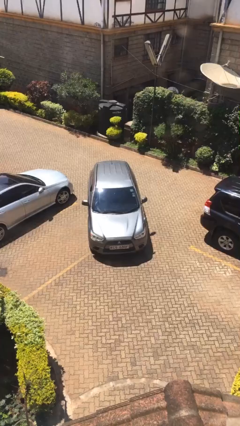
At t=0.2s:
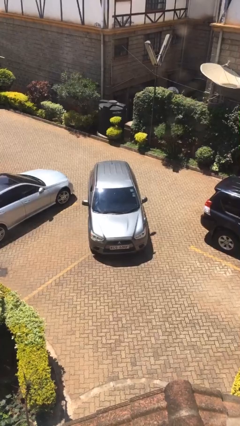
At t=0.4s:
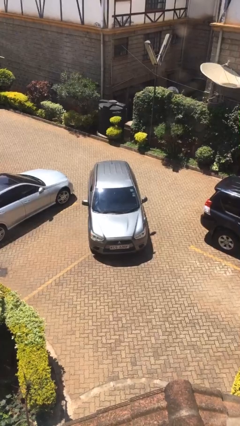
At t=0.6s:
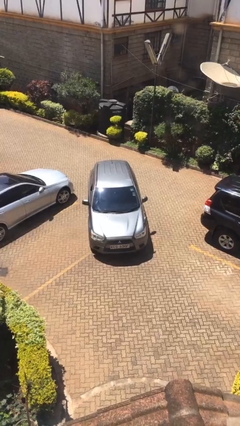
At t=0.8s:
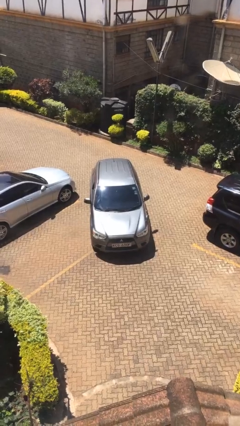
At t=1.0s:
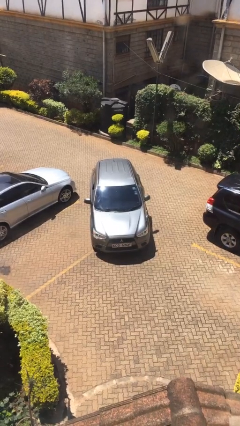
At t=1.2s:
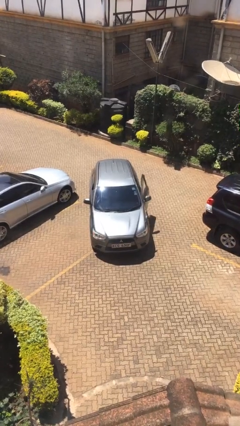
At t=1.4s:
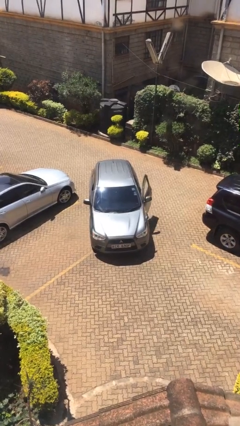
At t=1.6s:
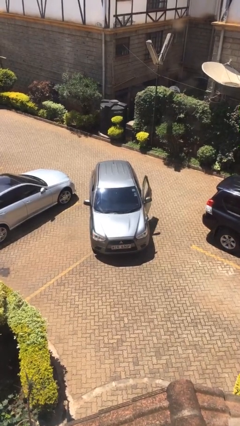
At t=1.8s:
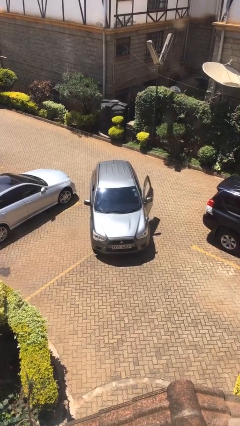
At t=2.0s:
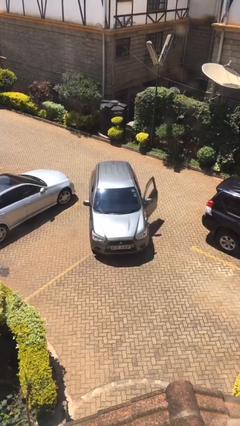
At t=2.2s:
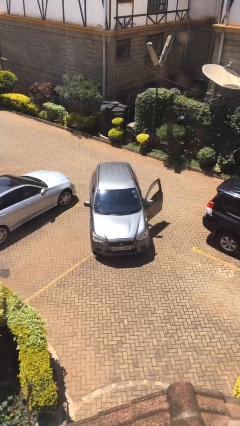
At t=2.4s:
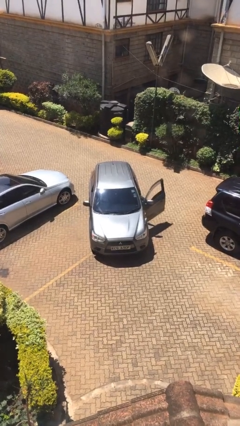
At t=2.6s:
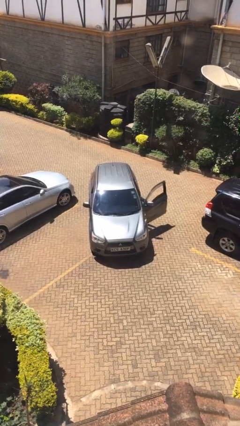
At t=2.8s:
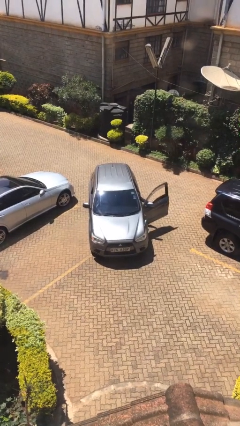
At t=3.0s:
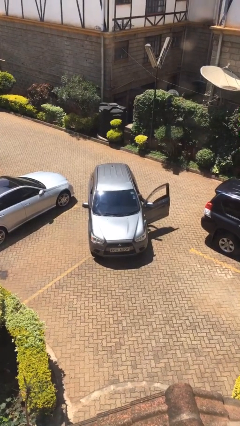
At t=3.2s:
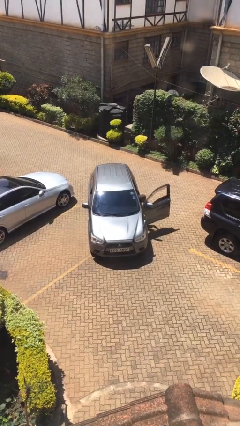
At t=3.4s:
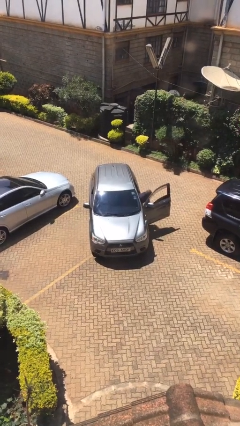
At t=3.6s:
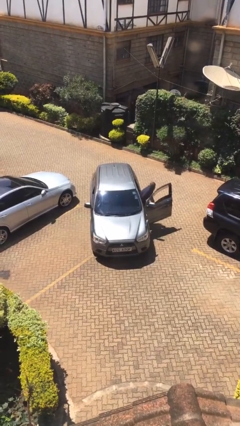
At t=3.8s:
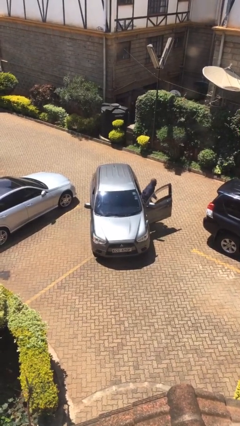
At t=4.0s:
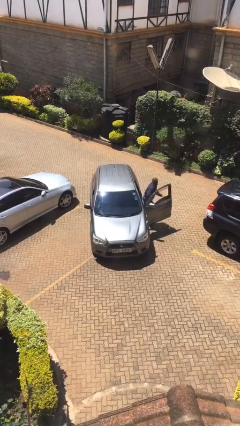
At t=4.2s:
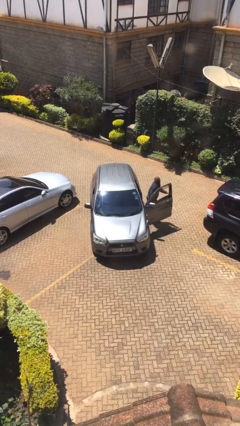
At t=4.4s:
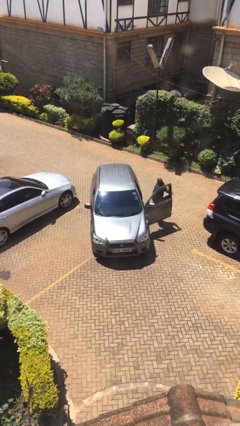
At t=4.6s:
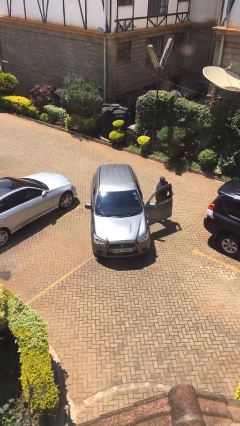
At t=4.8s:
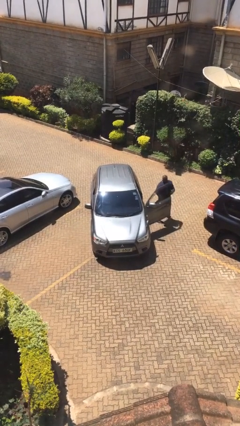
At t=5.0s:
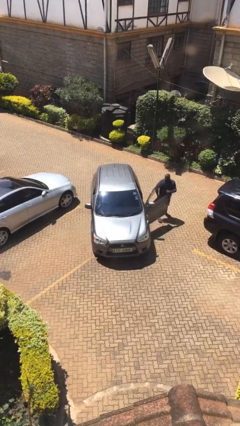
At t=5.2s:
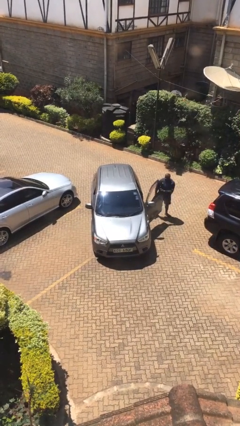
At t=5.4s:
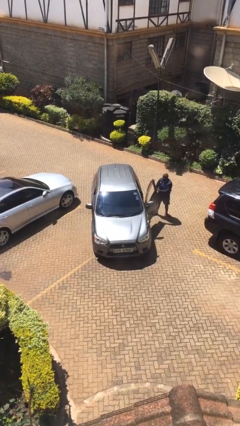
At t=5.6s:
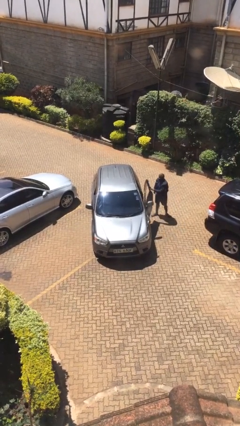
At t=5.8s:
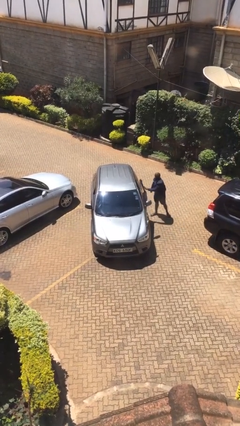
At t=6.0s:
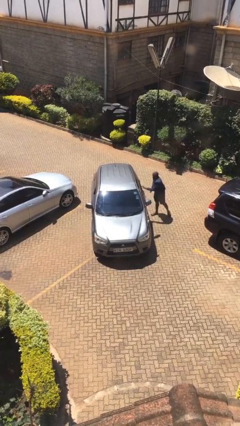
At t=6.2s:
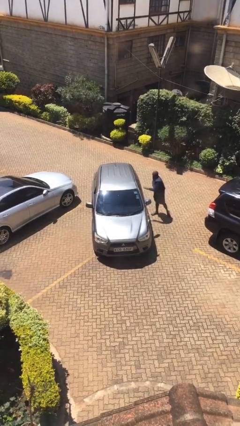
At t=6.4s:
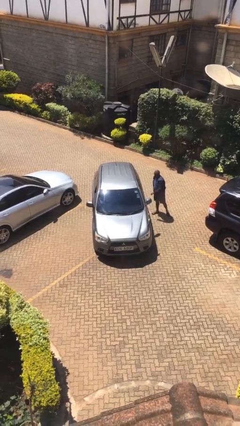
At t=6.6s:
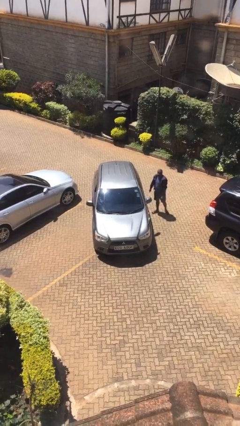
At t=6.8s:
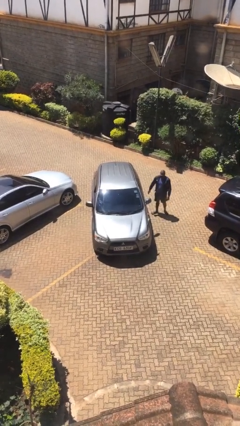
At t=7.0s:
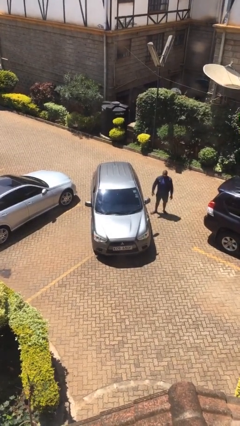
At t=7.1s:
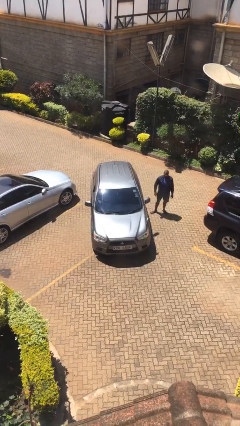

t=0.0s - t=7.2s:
car drops off person

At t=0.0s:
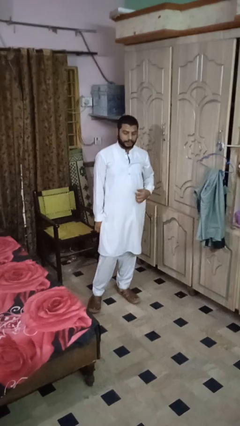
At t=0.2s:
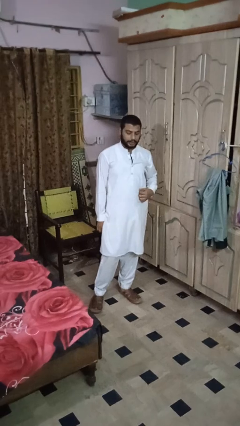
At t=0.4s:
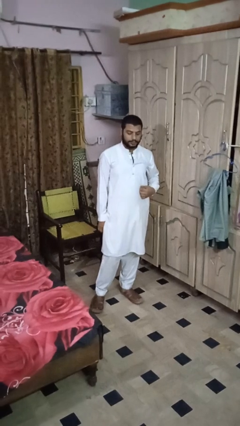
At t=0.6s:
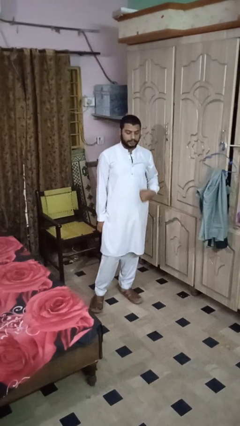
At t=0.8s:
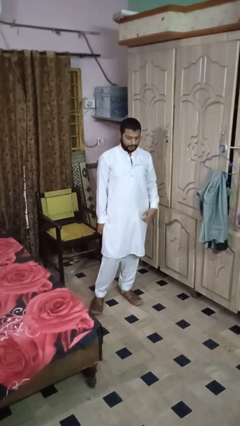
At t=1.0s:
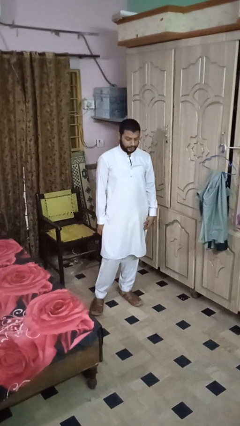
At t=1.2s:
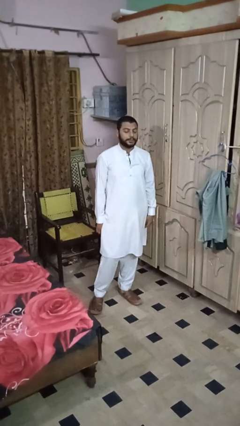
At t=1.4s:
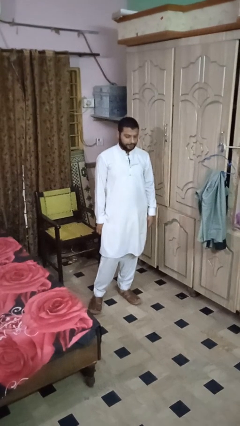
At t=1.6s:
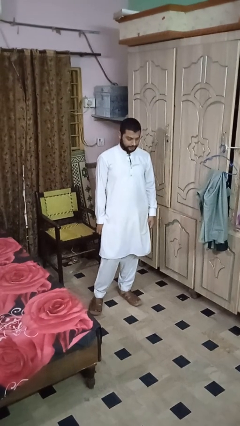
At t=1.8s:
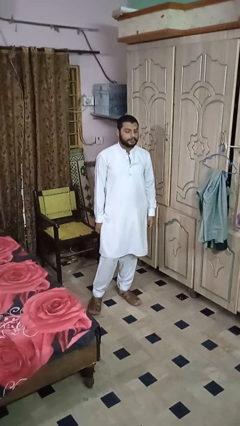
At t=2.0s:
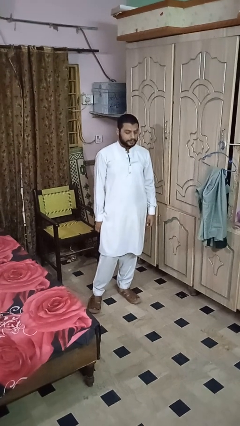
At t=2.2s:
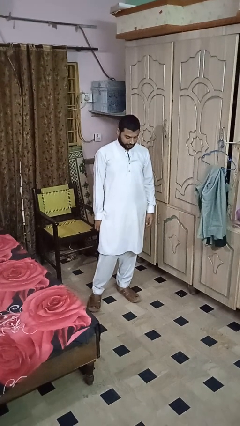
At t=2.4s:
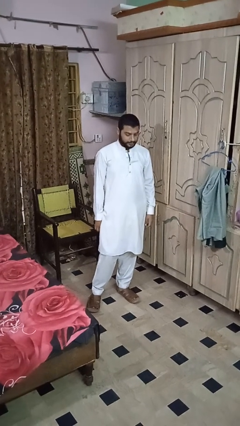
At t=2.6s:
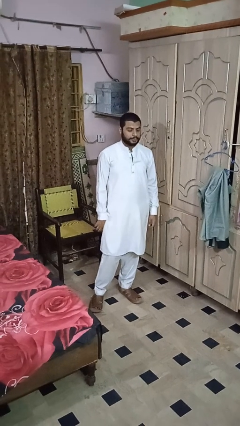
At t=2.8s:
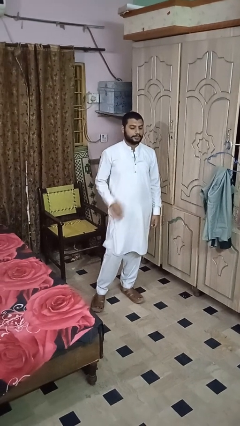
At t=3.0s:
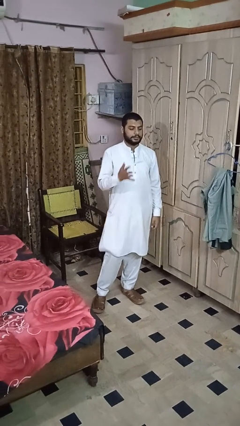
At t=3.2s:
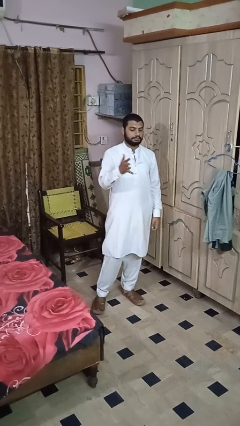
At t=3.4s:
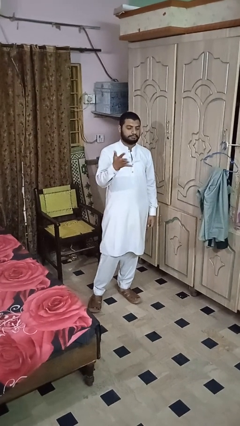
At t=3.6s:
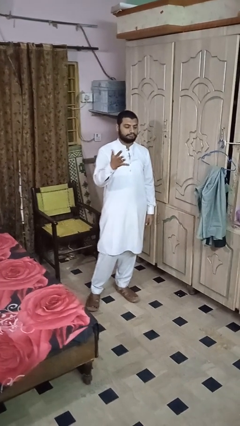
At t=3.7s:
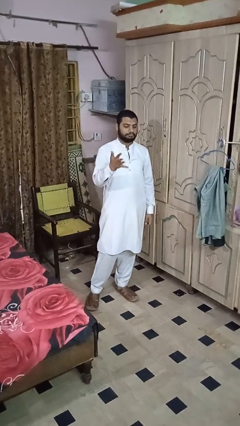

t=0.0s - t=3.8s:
person nods head

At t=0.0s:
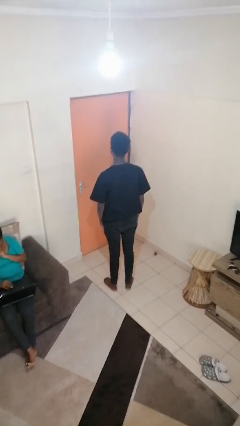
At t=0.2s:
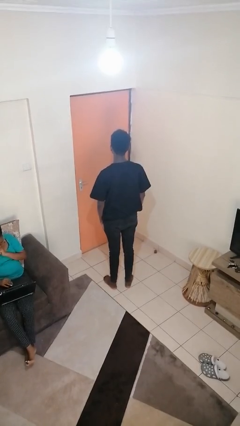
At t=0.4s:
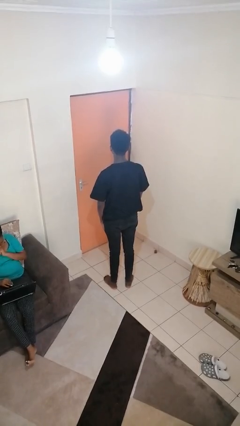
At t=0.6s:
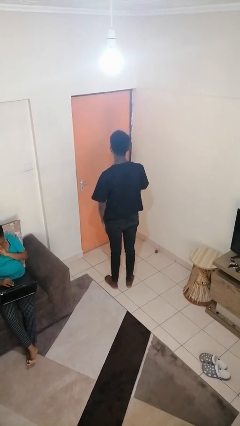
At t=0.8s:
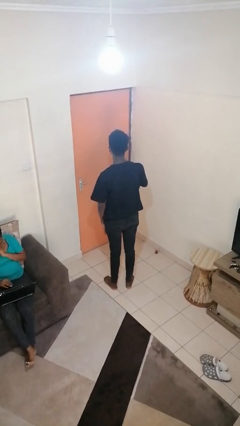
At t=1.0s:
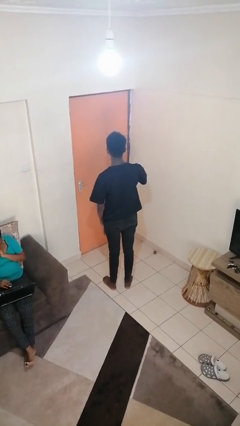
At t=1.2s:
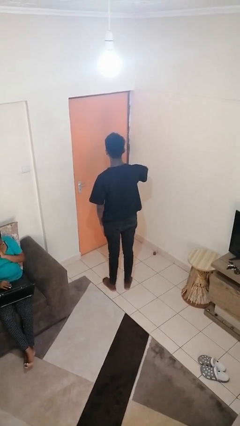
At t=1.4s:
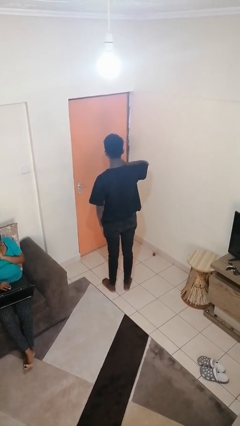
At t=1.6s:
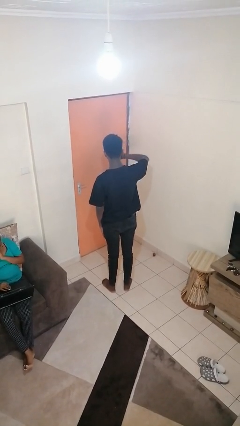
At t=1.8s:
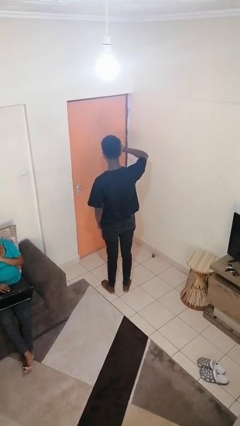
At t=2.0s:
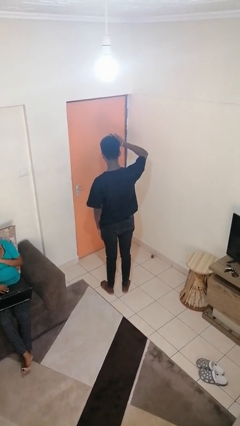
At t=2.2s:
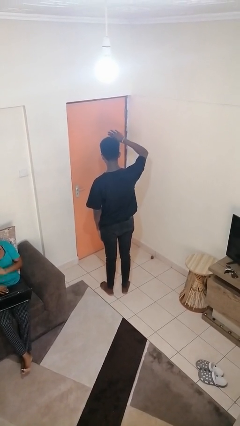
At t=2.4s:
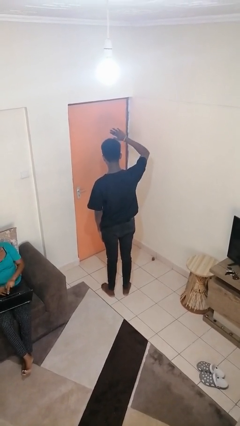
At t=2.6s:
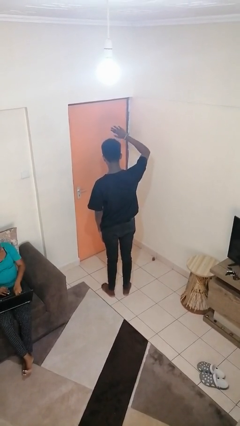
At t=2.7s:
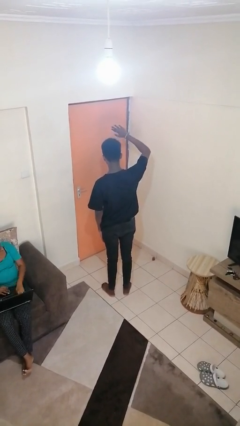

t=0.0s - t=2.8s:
person gestures swipe up

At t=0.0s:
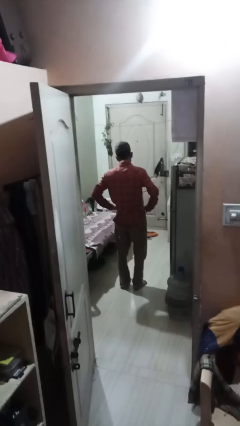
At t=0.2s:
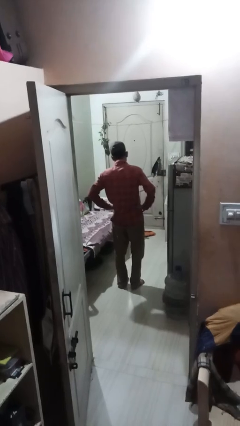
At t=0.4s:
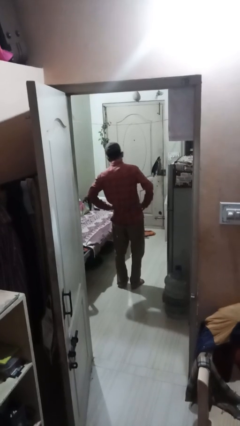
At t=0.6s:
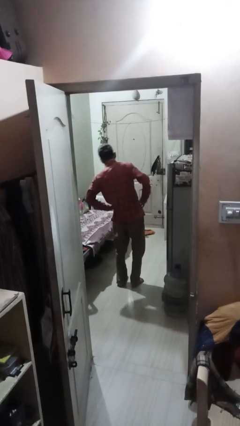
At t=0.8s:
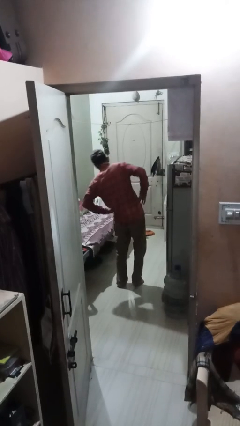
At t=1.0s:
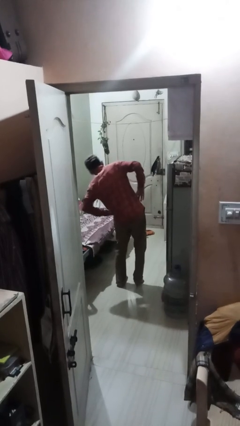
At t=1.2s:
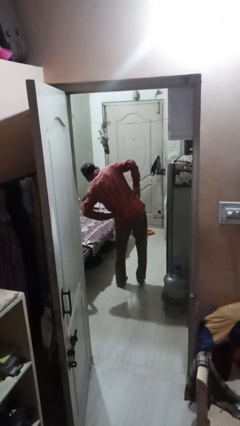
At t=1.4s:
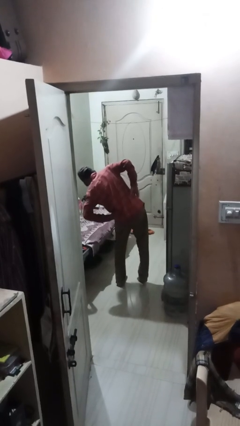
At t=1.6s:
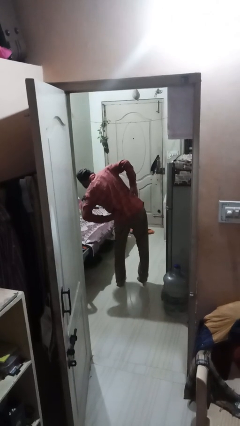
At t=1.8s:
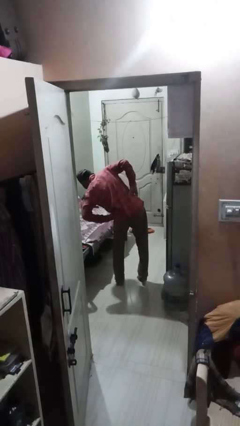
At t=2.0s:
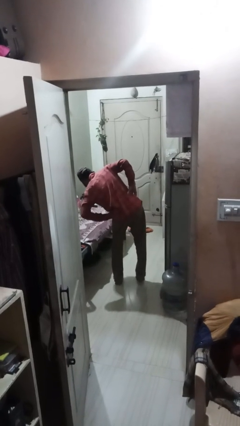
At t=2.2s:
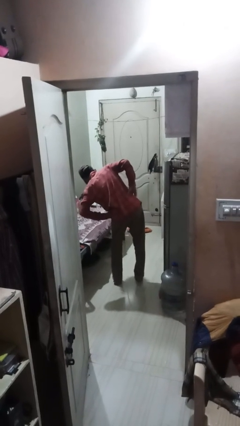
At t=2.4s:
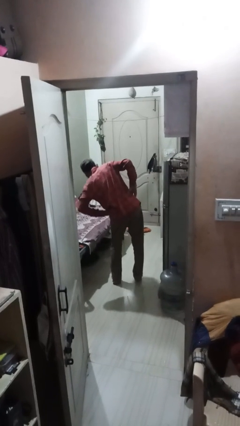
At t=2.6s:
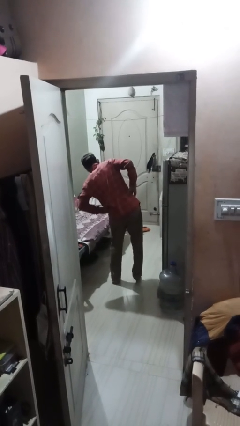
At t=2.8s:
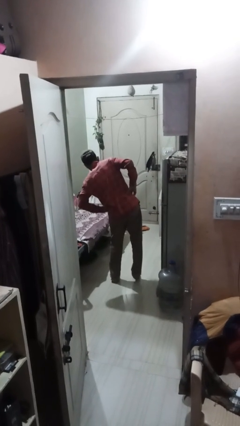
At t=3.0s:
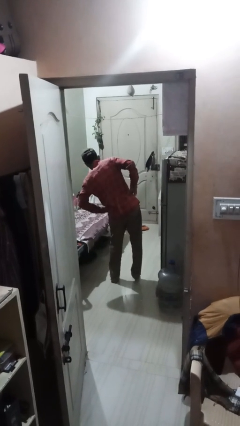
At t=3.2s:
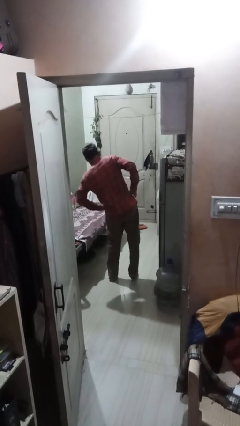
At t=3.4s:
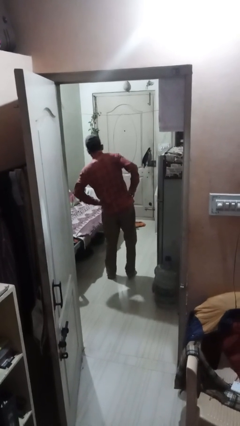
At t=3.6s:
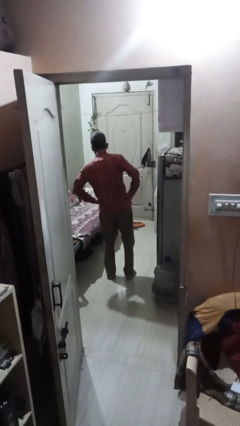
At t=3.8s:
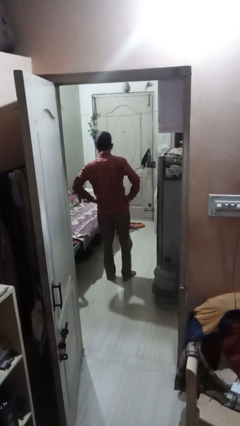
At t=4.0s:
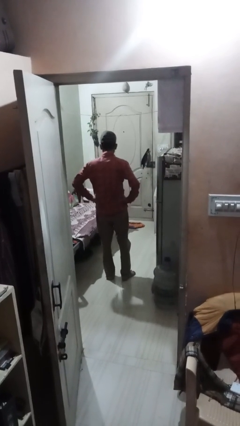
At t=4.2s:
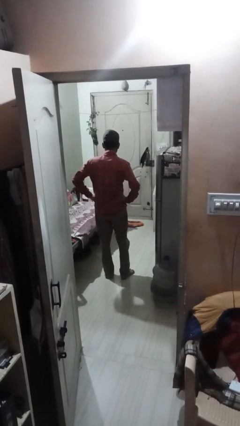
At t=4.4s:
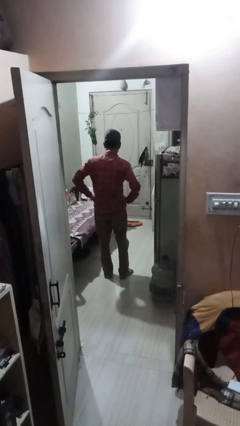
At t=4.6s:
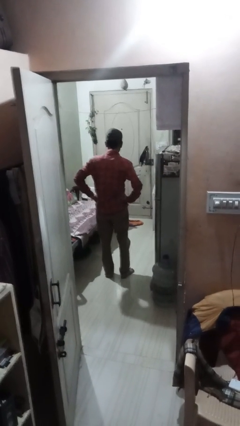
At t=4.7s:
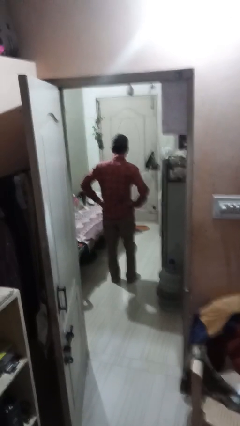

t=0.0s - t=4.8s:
person stretches arms to side
